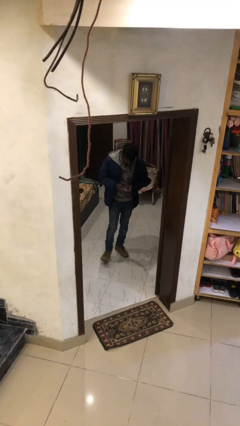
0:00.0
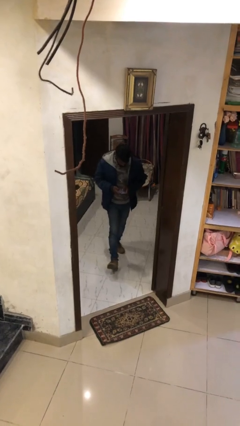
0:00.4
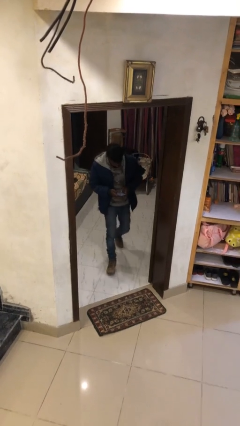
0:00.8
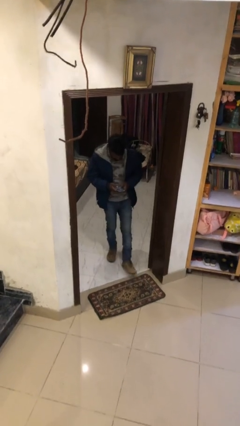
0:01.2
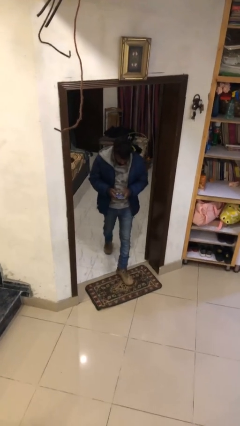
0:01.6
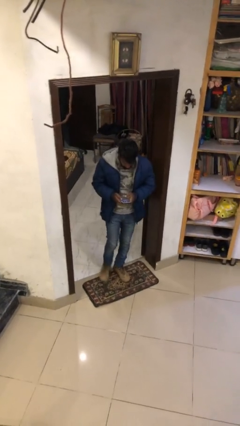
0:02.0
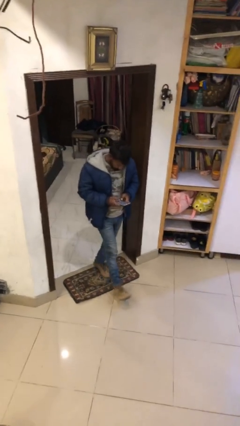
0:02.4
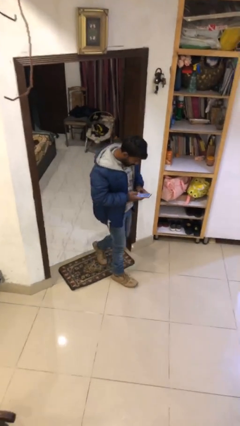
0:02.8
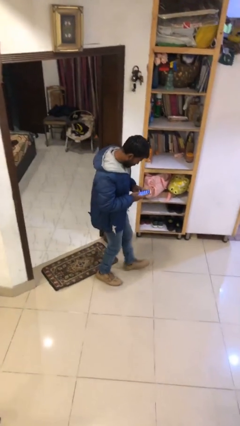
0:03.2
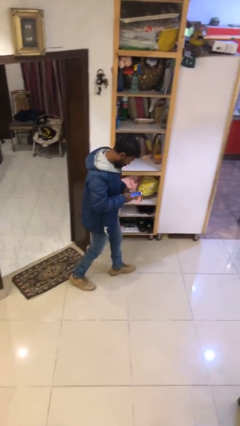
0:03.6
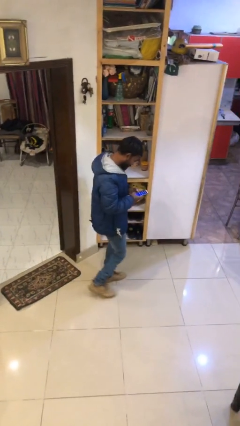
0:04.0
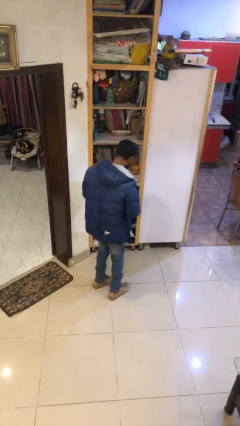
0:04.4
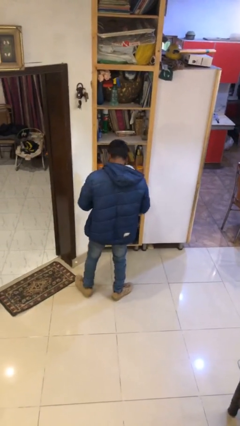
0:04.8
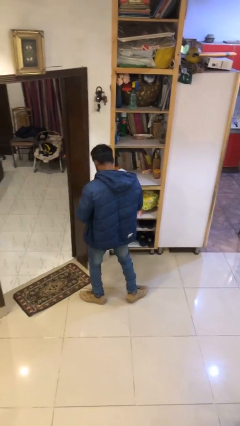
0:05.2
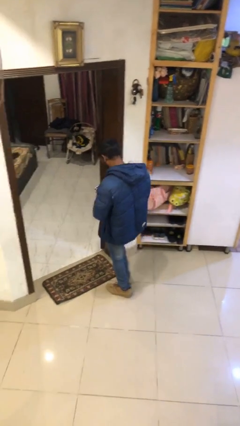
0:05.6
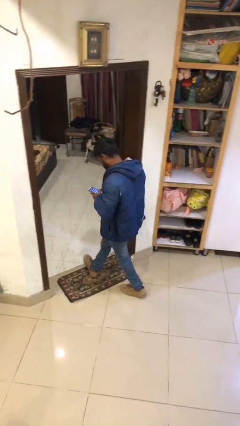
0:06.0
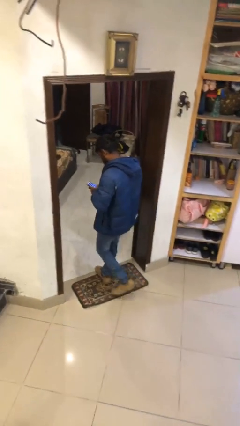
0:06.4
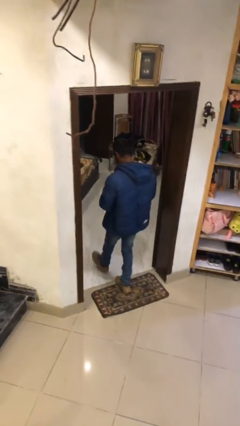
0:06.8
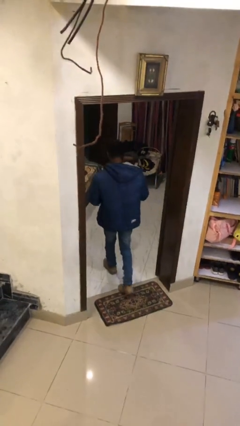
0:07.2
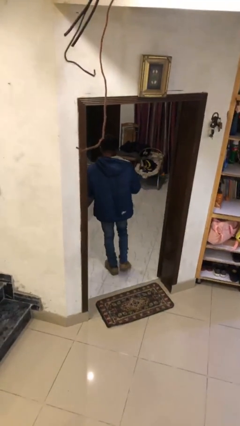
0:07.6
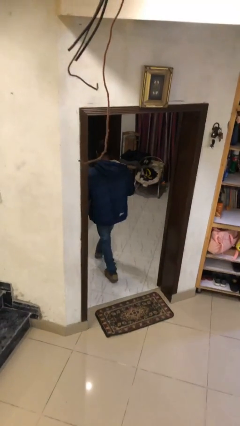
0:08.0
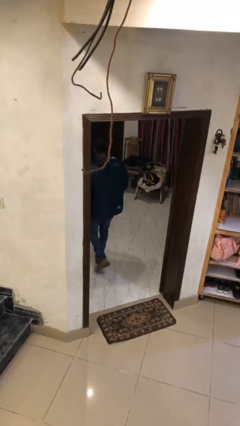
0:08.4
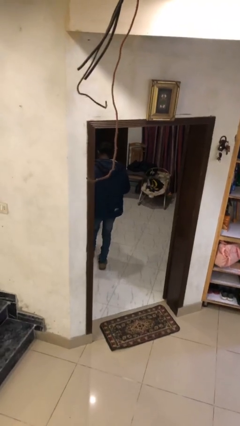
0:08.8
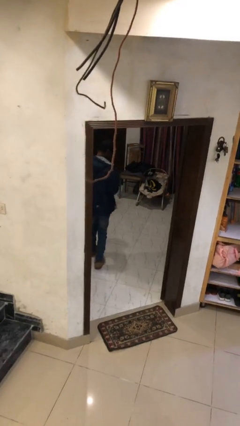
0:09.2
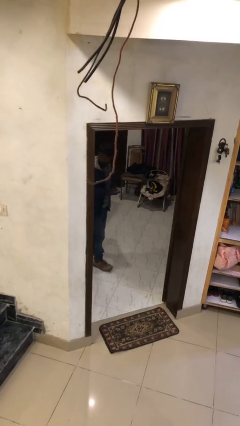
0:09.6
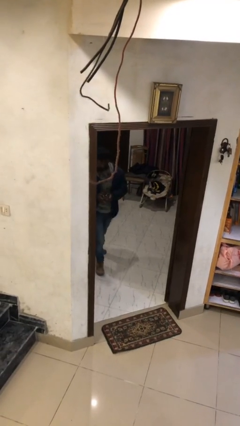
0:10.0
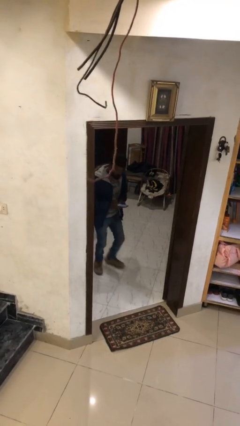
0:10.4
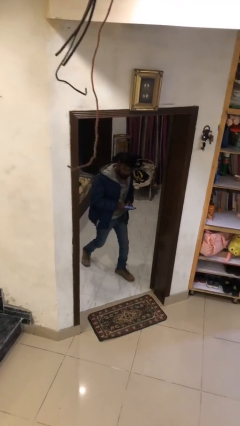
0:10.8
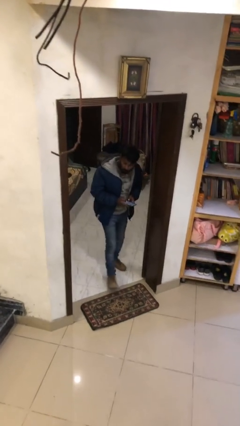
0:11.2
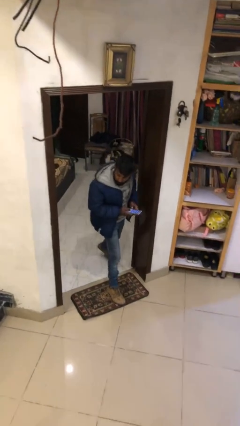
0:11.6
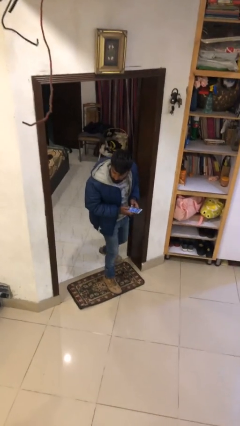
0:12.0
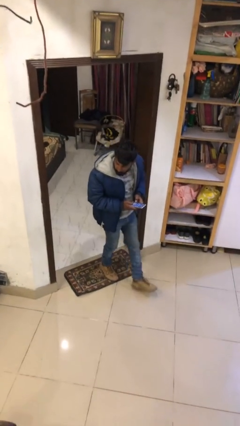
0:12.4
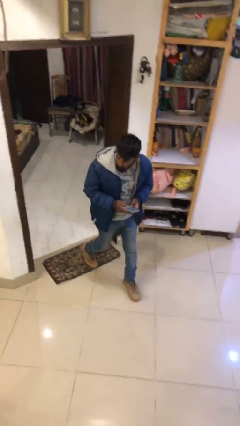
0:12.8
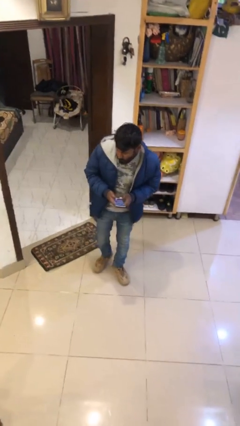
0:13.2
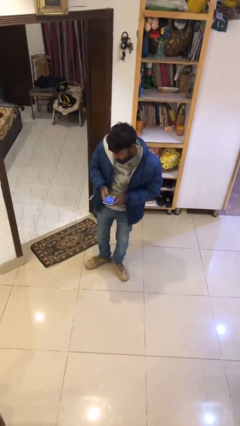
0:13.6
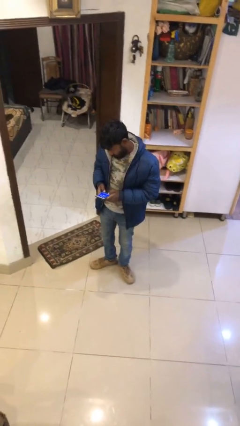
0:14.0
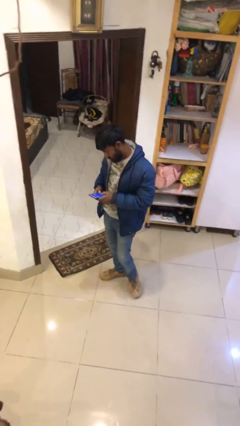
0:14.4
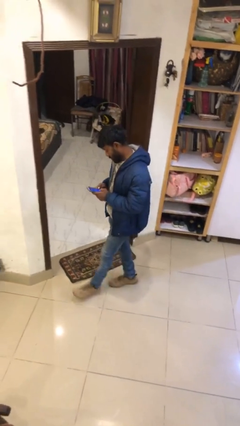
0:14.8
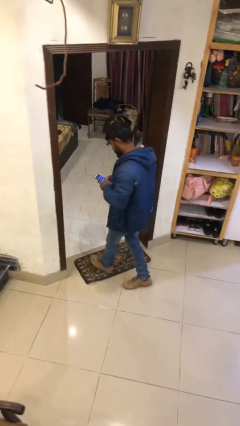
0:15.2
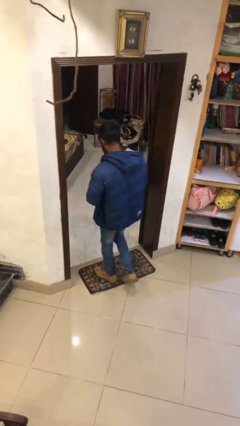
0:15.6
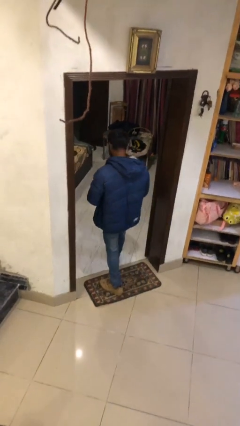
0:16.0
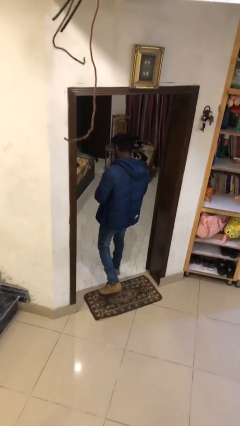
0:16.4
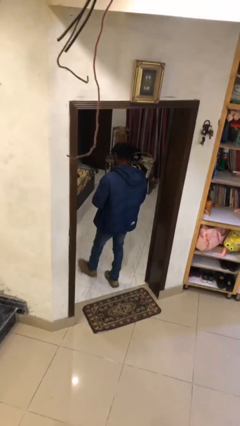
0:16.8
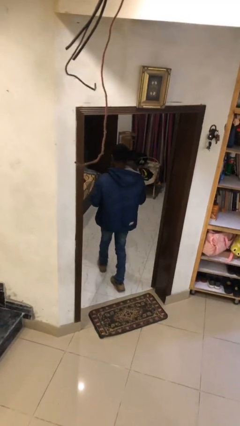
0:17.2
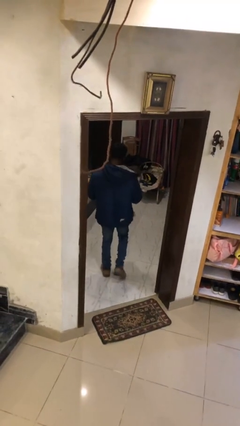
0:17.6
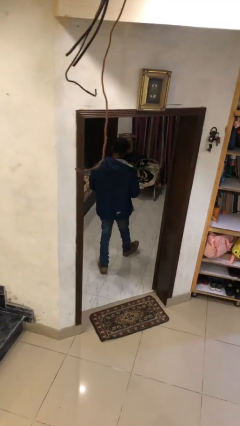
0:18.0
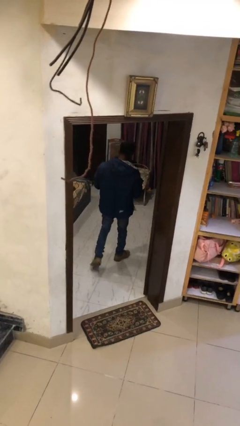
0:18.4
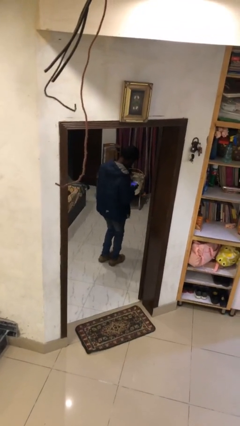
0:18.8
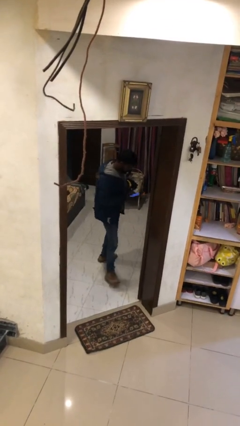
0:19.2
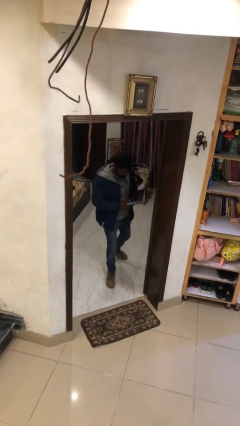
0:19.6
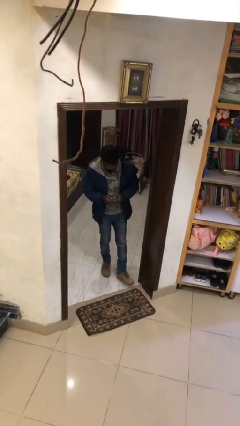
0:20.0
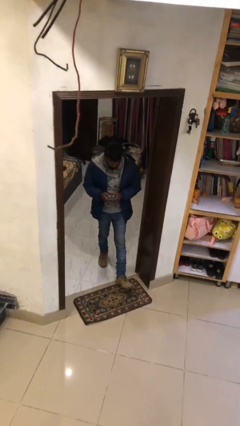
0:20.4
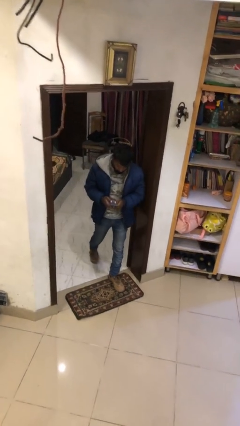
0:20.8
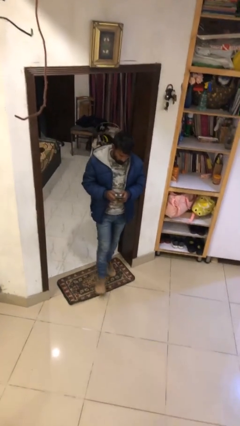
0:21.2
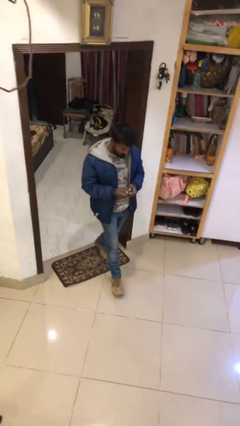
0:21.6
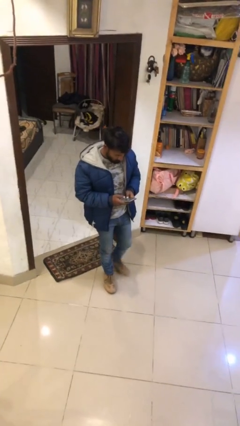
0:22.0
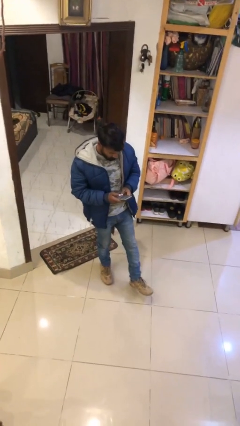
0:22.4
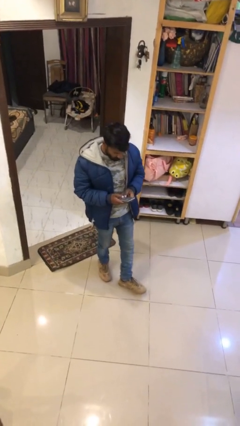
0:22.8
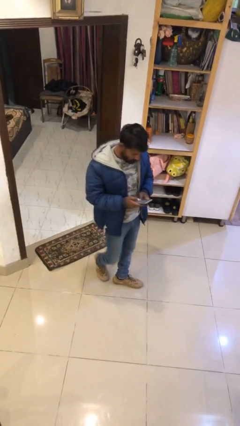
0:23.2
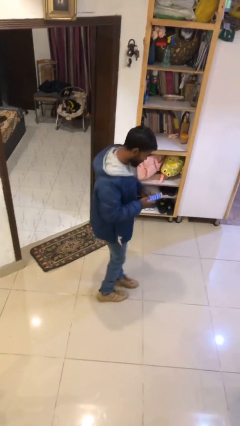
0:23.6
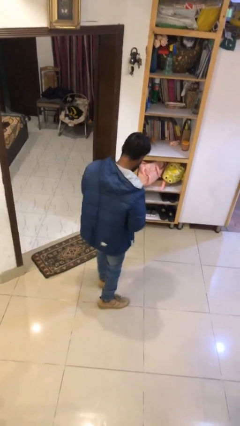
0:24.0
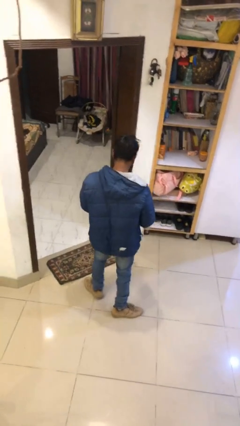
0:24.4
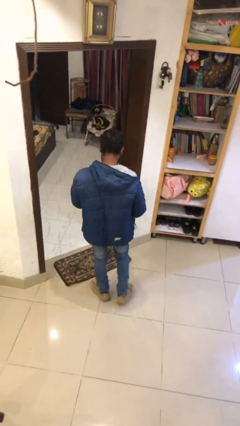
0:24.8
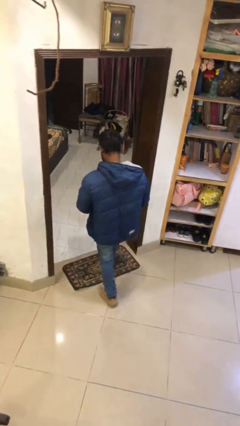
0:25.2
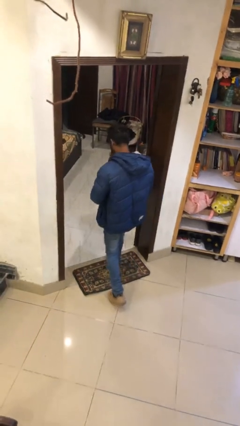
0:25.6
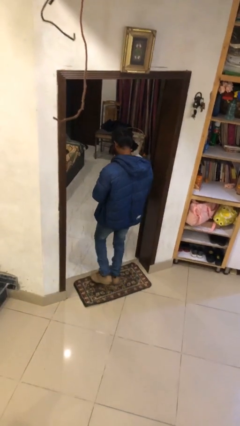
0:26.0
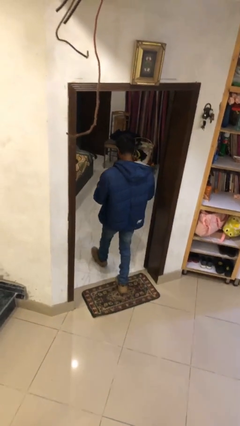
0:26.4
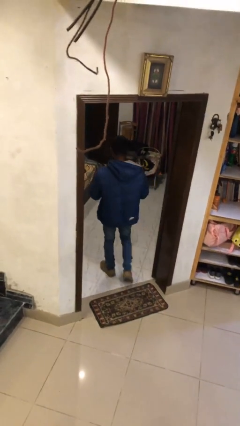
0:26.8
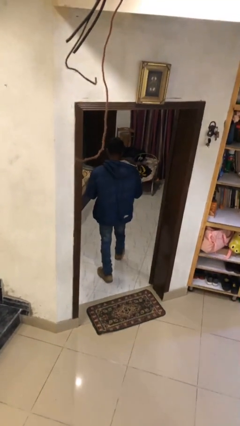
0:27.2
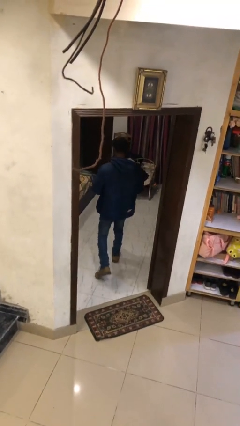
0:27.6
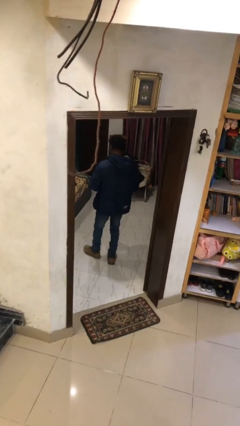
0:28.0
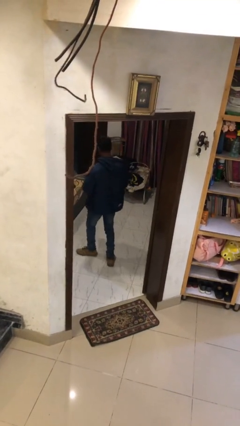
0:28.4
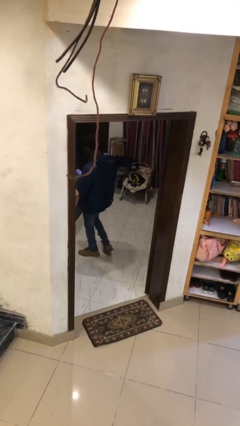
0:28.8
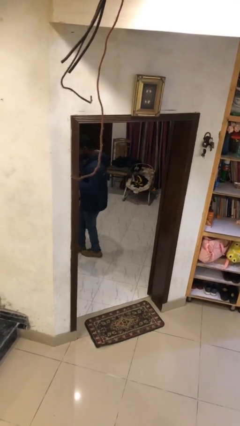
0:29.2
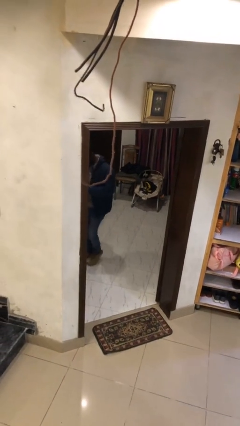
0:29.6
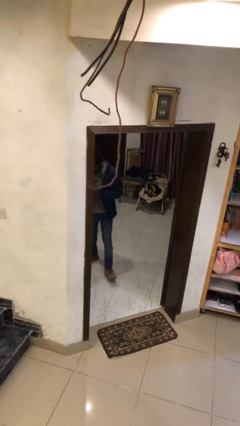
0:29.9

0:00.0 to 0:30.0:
person texts on phone

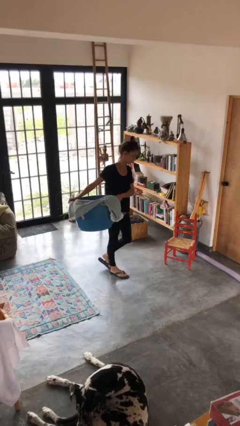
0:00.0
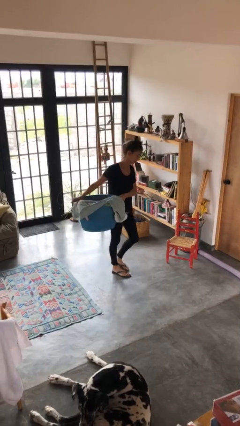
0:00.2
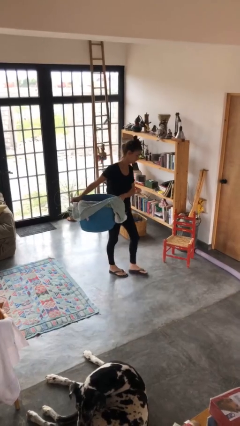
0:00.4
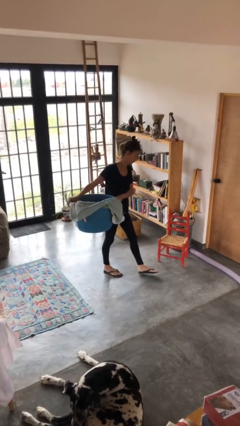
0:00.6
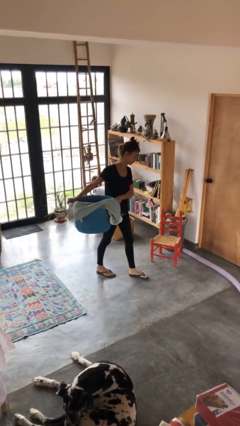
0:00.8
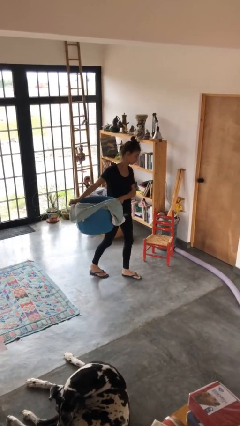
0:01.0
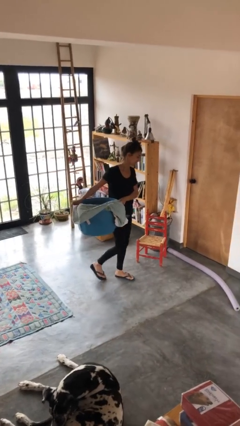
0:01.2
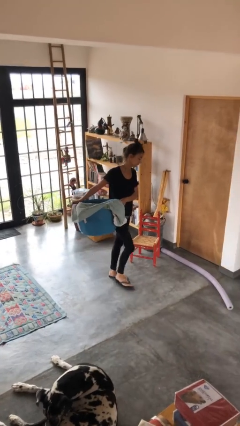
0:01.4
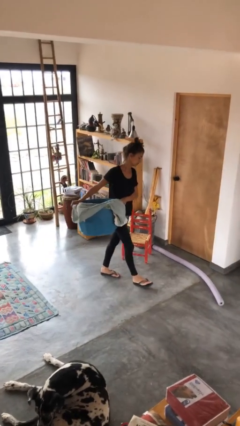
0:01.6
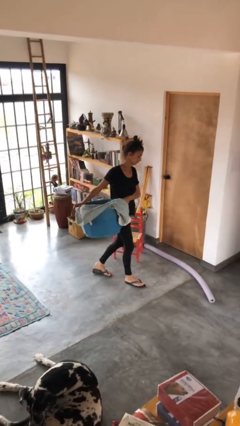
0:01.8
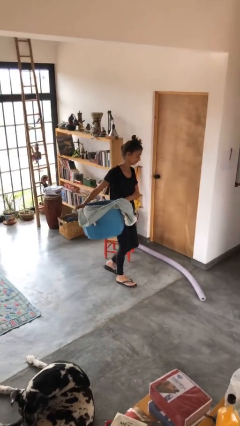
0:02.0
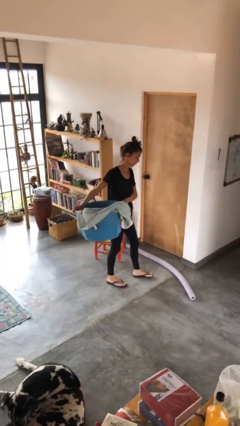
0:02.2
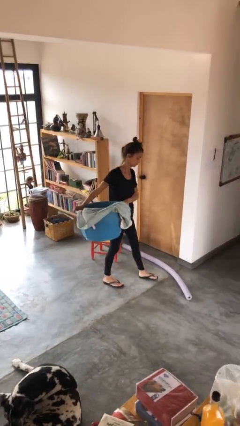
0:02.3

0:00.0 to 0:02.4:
person carries laundry basket

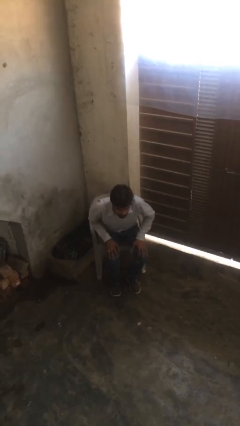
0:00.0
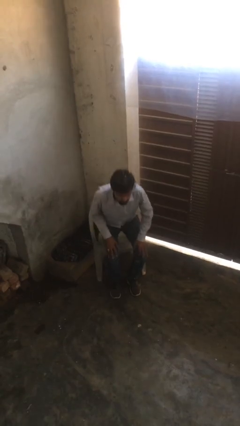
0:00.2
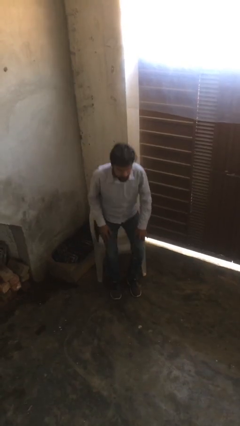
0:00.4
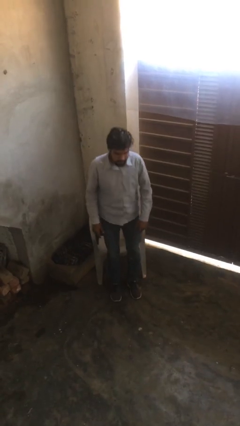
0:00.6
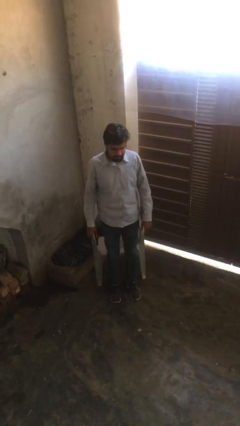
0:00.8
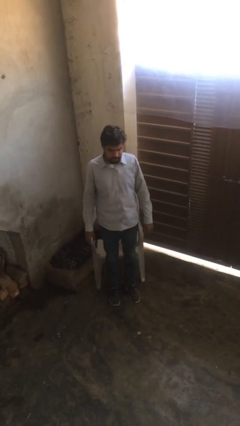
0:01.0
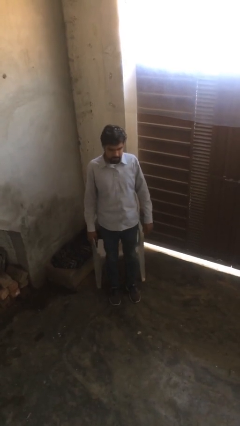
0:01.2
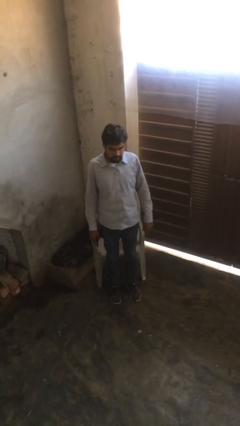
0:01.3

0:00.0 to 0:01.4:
person stands up
